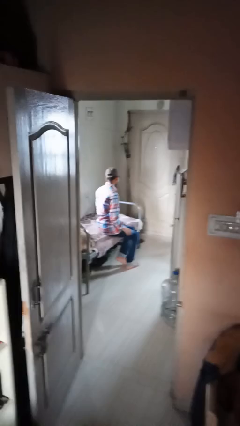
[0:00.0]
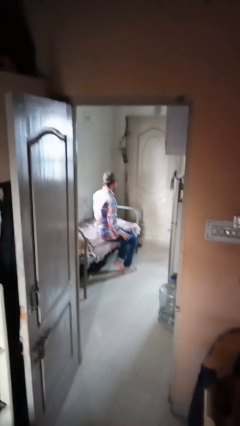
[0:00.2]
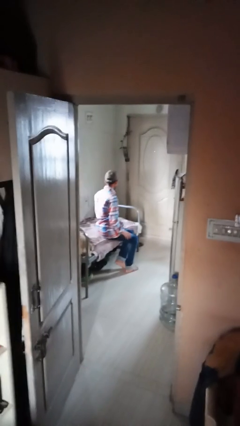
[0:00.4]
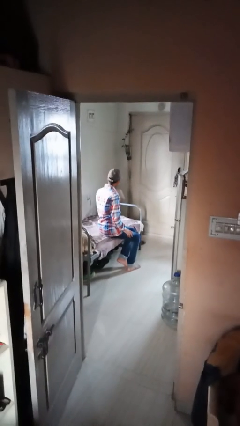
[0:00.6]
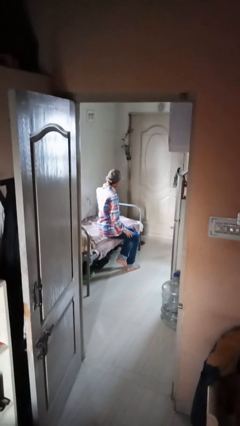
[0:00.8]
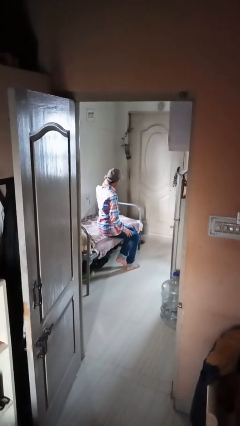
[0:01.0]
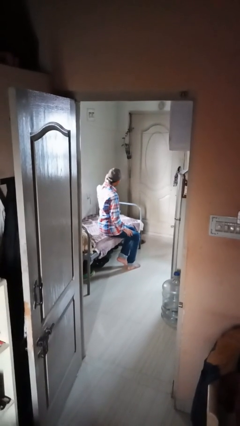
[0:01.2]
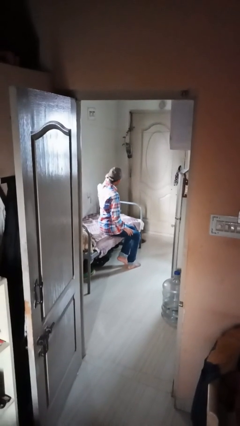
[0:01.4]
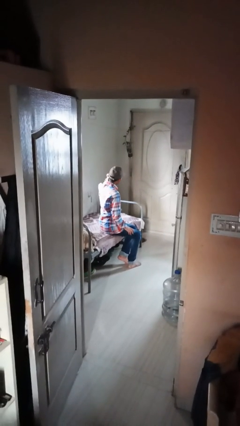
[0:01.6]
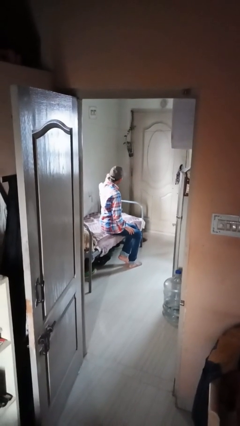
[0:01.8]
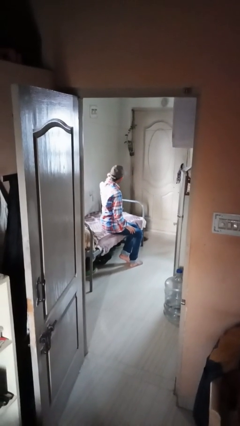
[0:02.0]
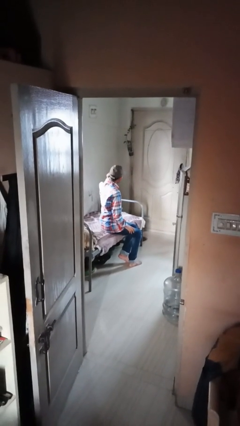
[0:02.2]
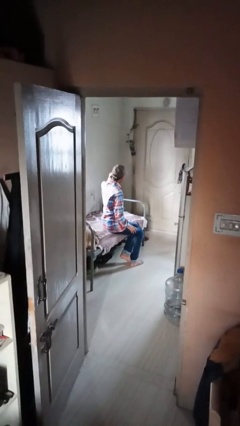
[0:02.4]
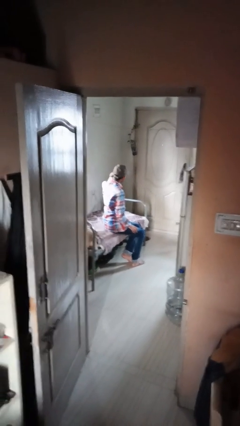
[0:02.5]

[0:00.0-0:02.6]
person puts fingers in ear

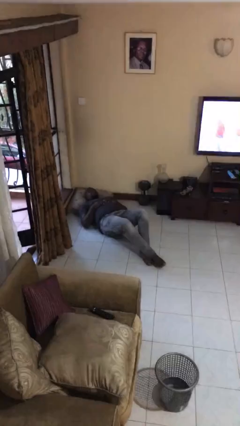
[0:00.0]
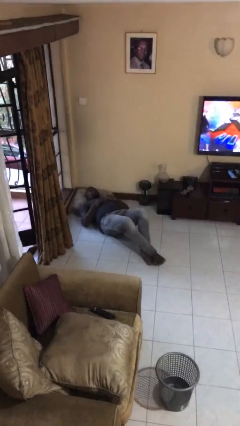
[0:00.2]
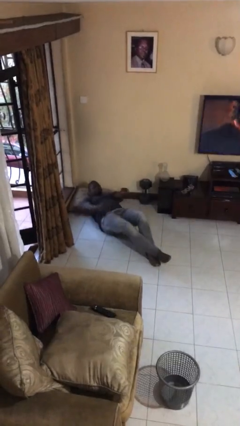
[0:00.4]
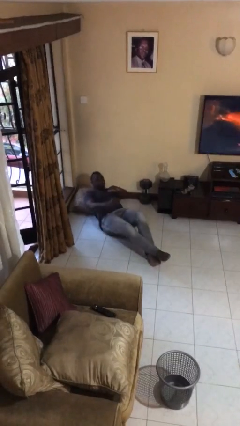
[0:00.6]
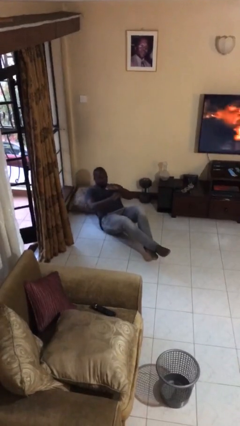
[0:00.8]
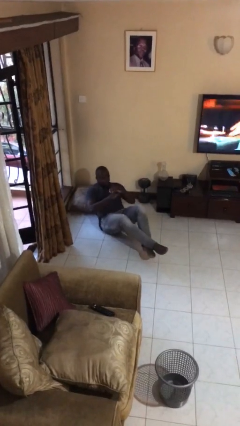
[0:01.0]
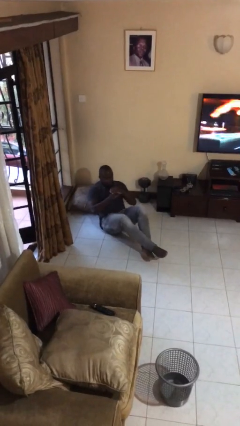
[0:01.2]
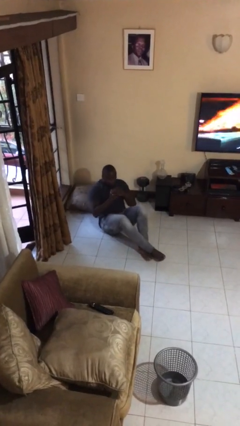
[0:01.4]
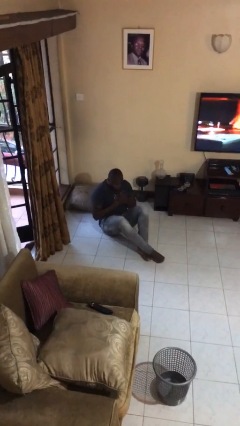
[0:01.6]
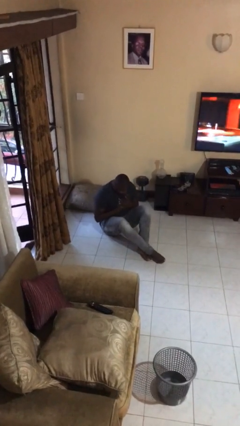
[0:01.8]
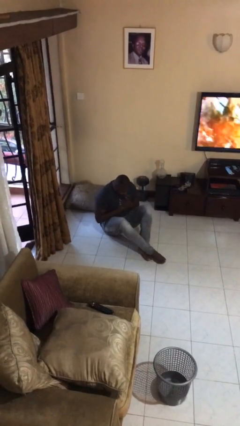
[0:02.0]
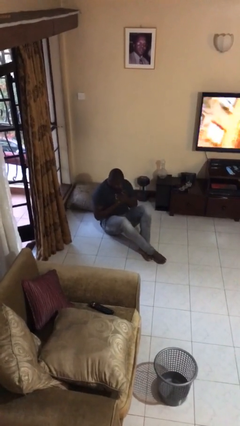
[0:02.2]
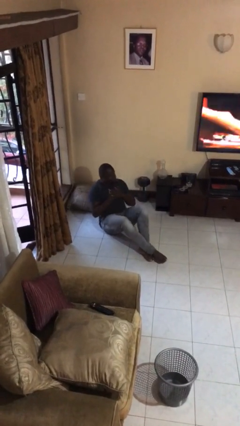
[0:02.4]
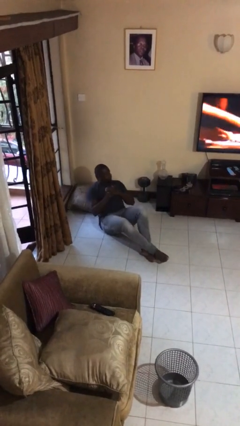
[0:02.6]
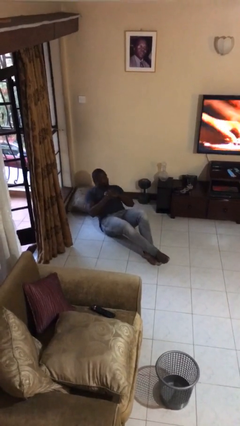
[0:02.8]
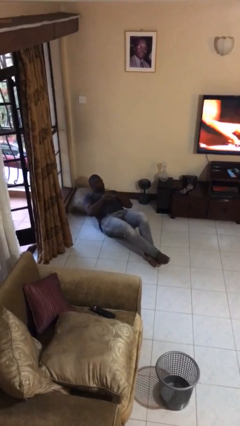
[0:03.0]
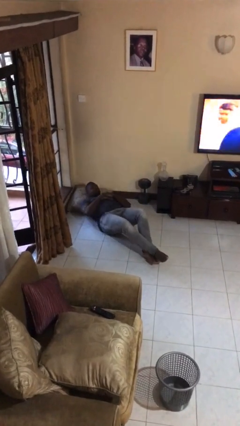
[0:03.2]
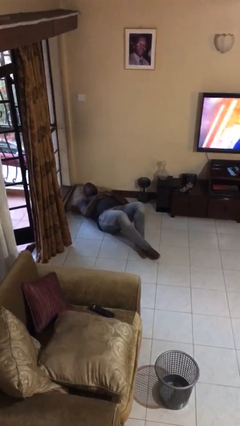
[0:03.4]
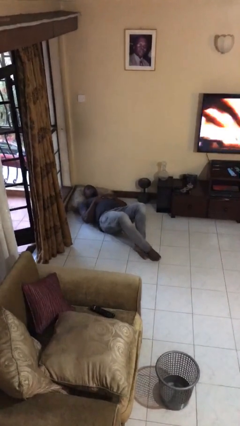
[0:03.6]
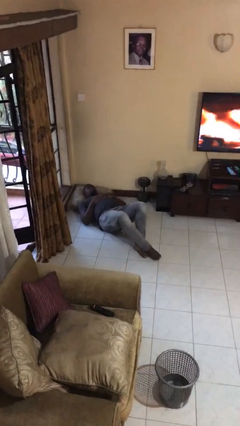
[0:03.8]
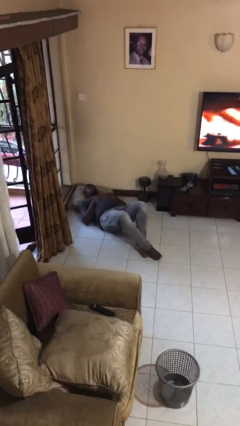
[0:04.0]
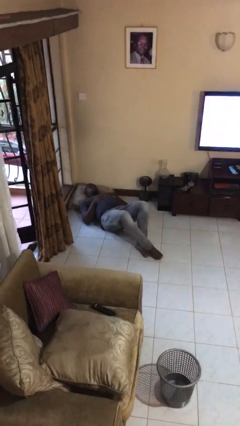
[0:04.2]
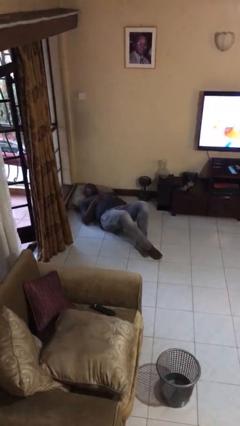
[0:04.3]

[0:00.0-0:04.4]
person exercises with situp

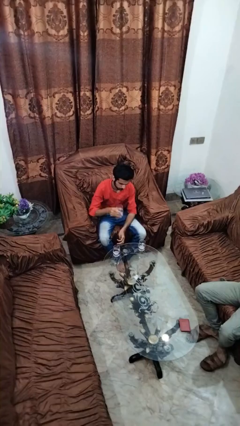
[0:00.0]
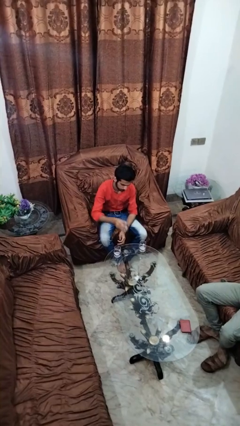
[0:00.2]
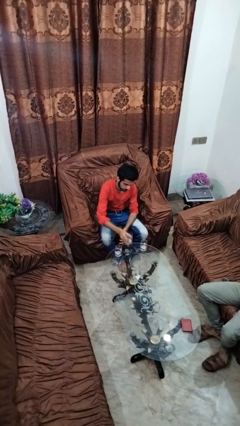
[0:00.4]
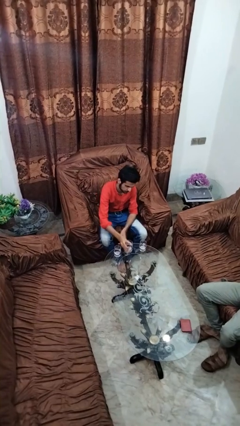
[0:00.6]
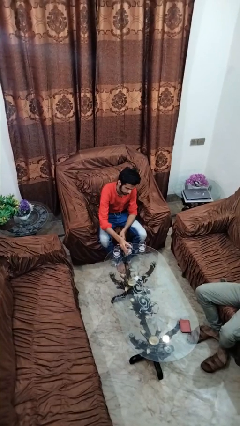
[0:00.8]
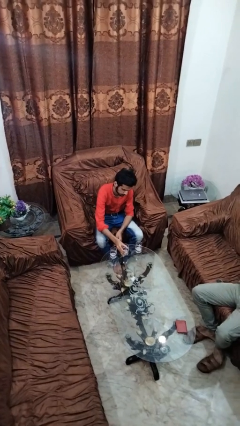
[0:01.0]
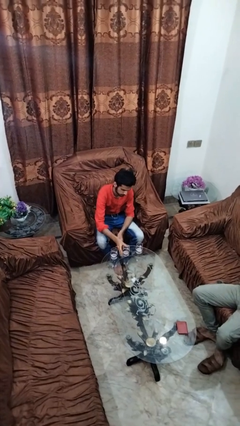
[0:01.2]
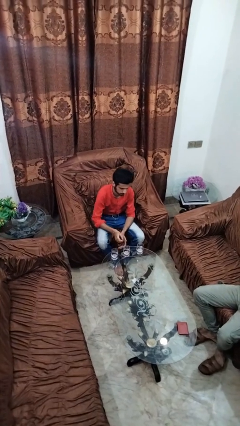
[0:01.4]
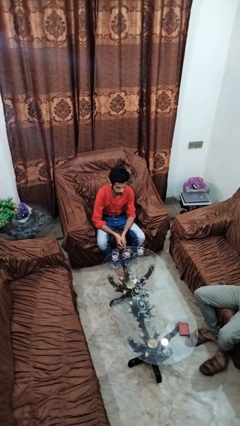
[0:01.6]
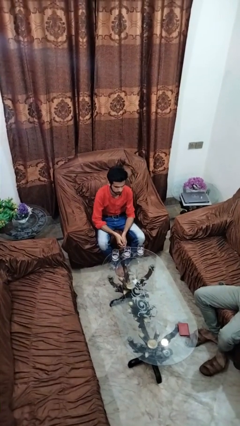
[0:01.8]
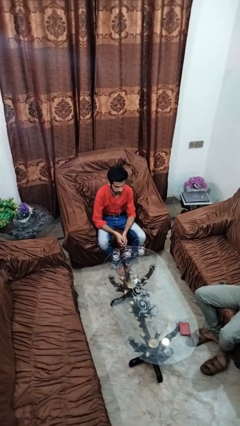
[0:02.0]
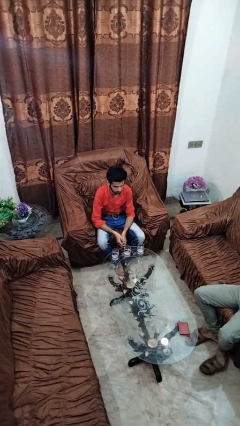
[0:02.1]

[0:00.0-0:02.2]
person puts down object on table

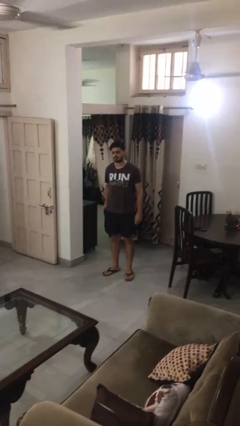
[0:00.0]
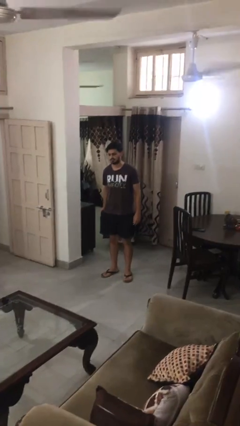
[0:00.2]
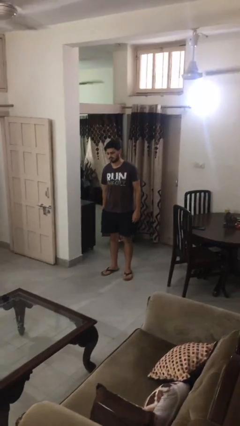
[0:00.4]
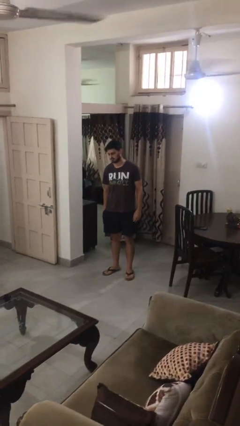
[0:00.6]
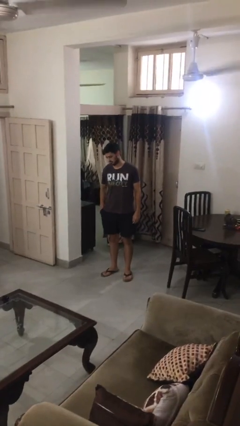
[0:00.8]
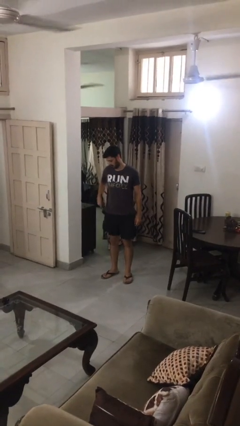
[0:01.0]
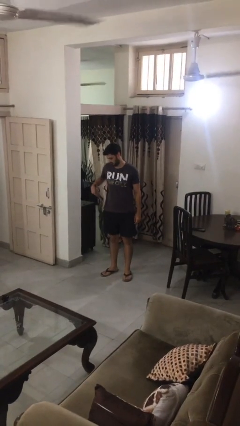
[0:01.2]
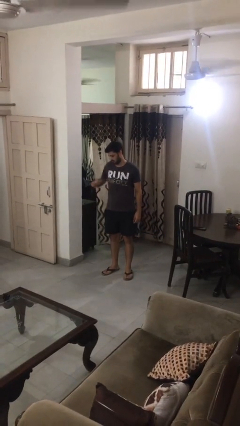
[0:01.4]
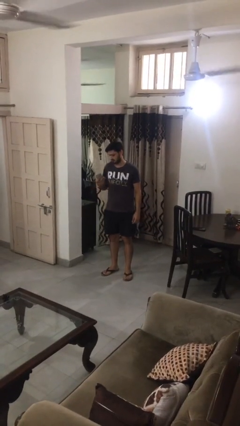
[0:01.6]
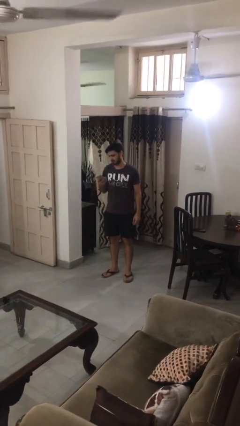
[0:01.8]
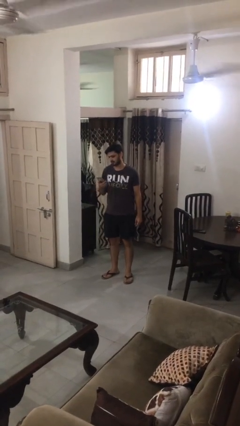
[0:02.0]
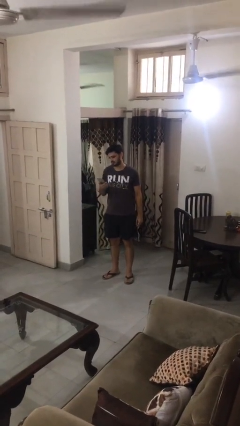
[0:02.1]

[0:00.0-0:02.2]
person takes phone from pocket

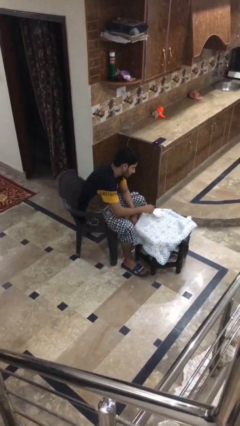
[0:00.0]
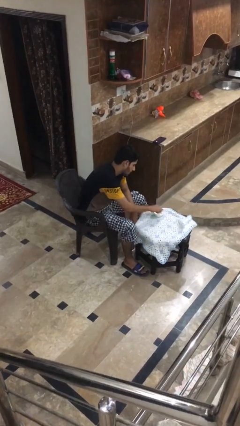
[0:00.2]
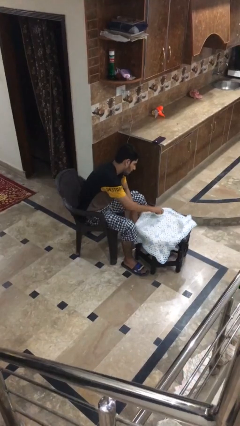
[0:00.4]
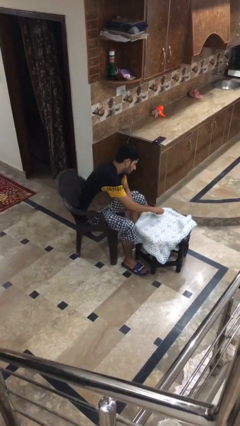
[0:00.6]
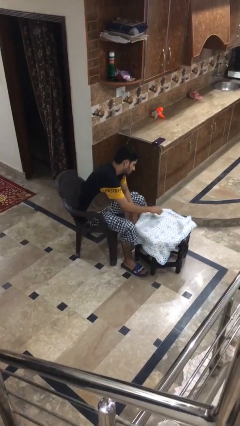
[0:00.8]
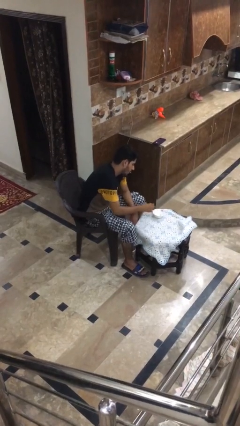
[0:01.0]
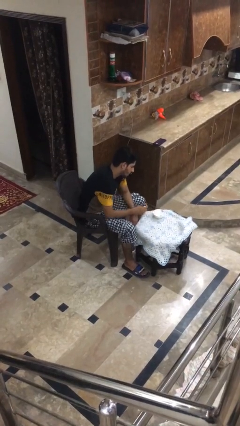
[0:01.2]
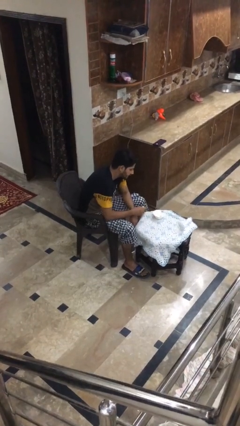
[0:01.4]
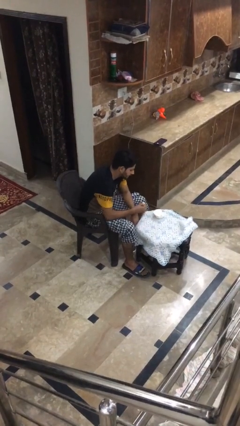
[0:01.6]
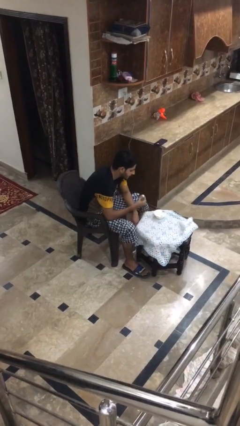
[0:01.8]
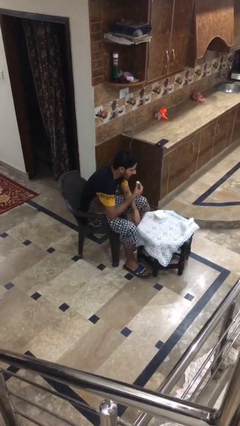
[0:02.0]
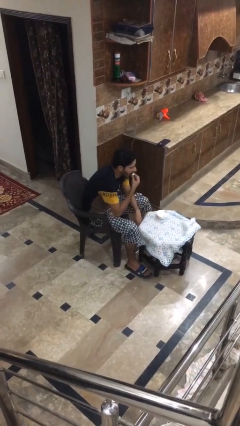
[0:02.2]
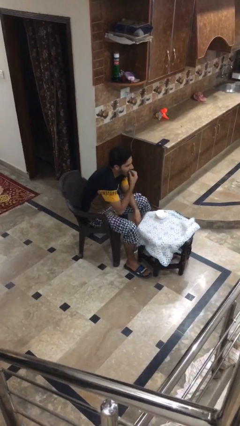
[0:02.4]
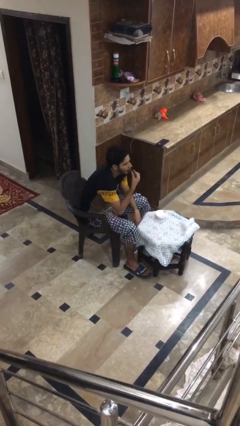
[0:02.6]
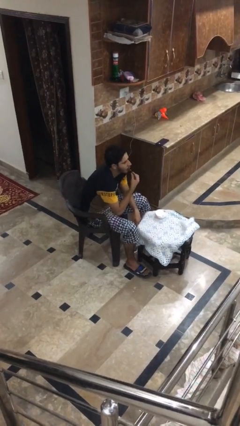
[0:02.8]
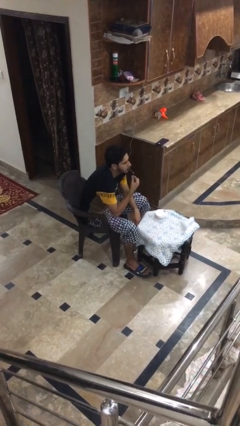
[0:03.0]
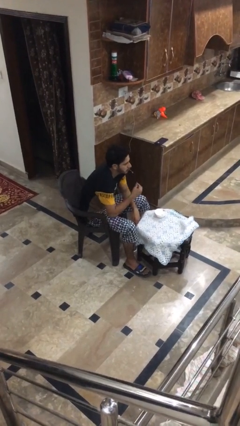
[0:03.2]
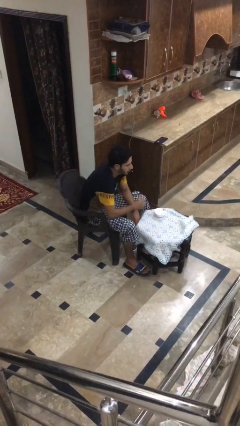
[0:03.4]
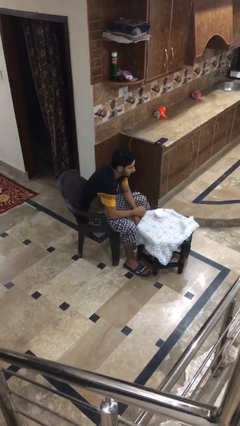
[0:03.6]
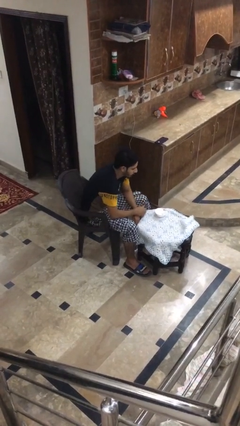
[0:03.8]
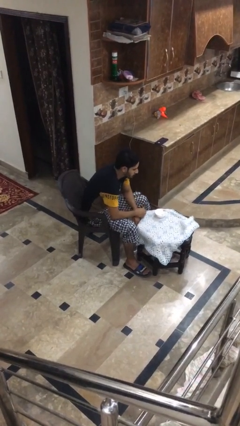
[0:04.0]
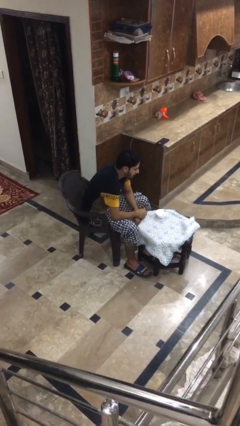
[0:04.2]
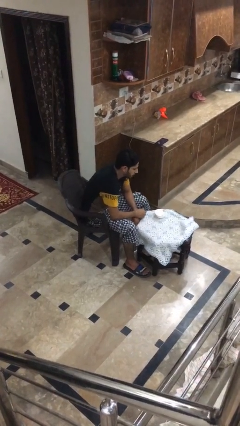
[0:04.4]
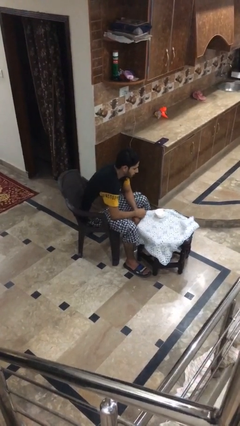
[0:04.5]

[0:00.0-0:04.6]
person eats with hands

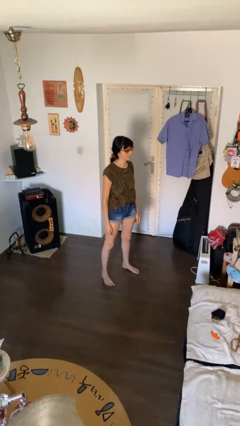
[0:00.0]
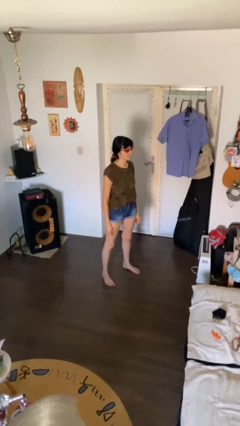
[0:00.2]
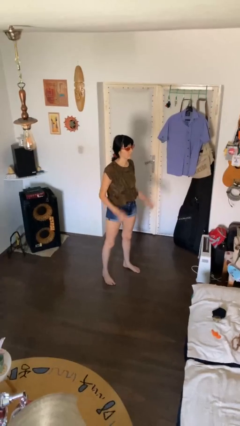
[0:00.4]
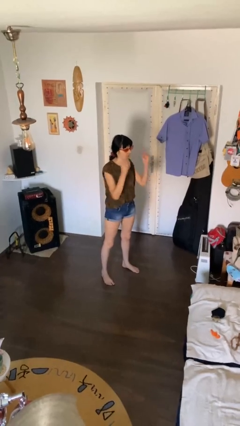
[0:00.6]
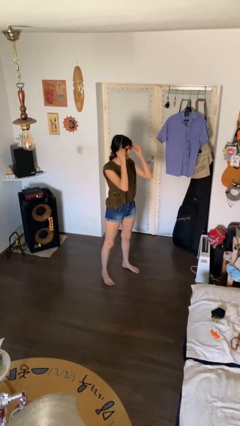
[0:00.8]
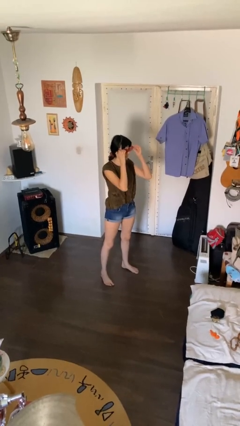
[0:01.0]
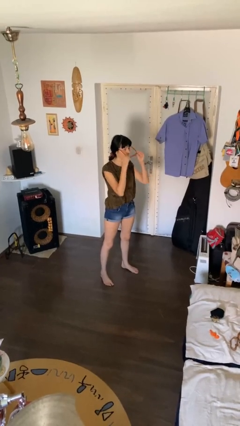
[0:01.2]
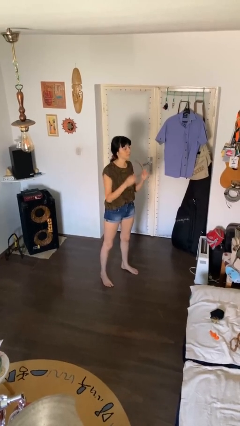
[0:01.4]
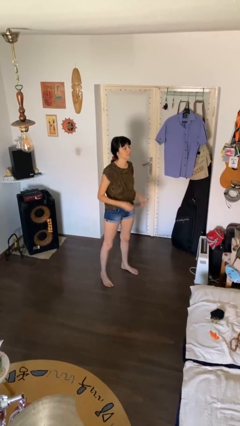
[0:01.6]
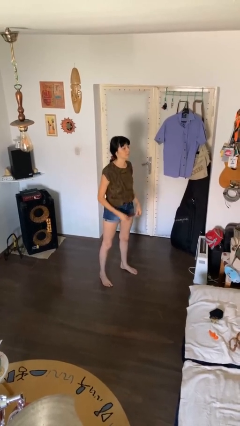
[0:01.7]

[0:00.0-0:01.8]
person takes off sunglasses
